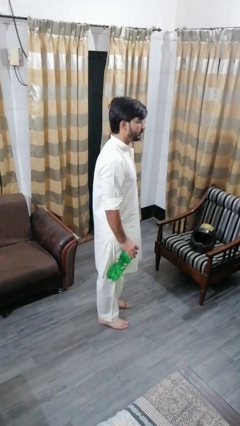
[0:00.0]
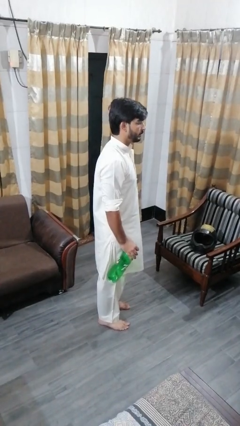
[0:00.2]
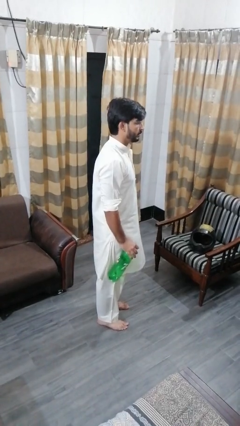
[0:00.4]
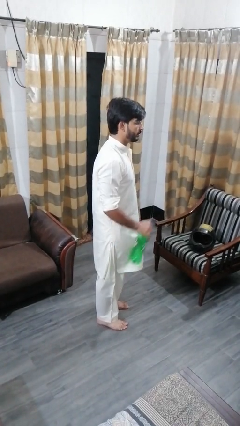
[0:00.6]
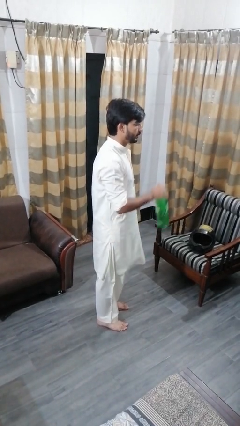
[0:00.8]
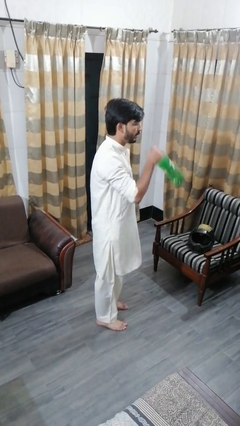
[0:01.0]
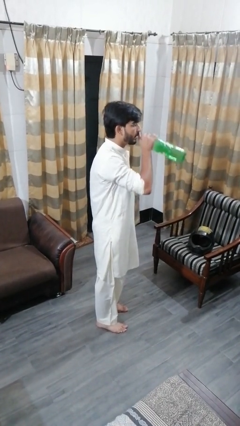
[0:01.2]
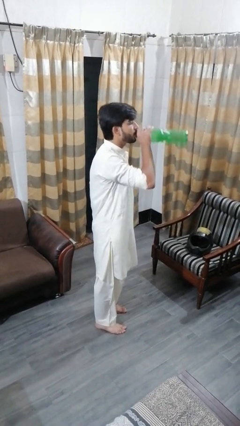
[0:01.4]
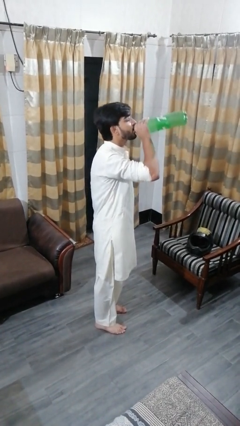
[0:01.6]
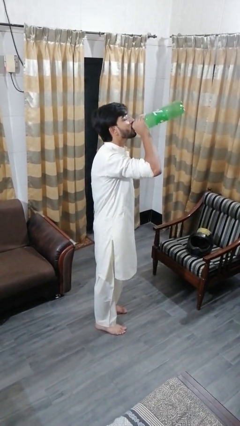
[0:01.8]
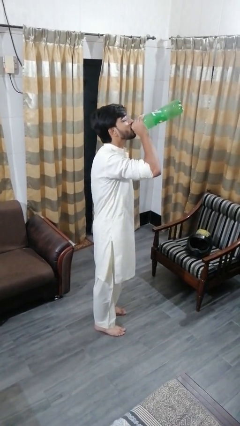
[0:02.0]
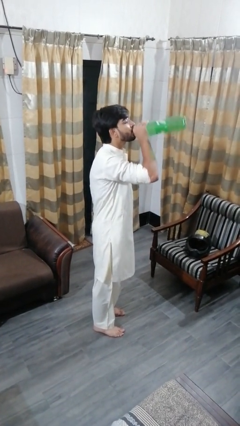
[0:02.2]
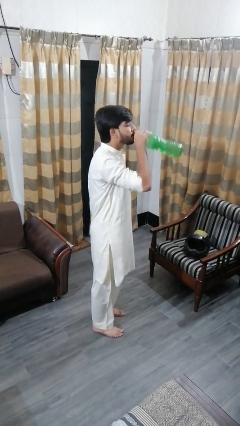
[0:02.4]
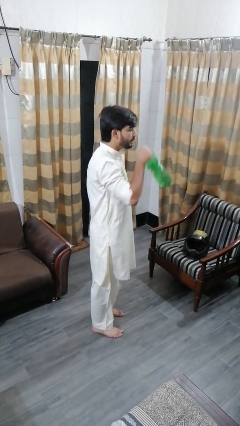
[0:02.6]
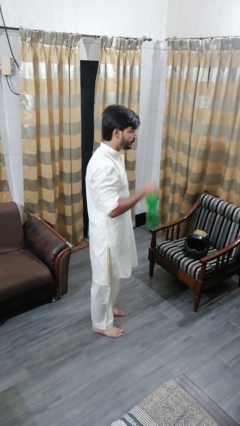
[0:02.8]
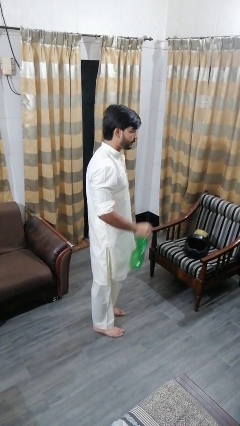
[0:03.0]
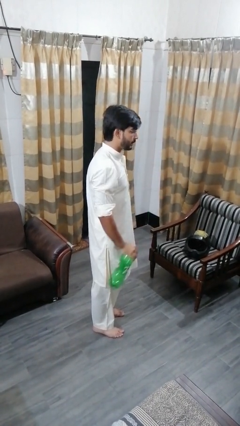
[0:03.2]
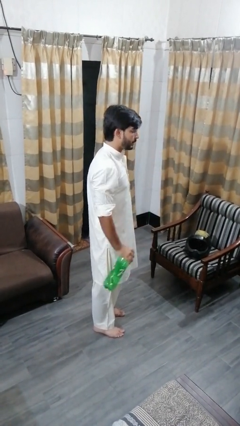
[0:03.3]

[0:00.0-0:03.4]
person drinks from bottle

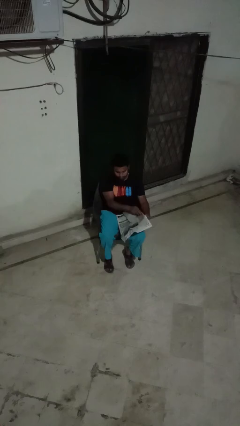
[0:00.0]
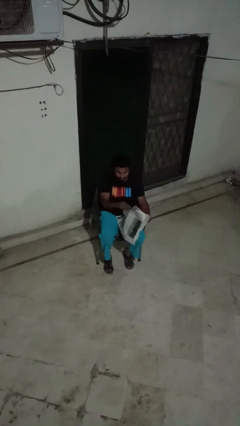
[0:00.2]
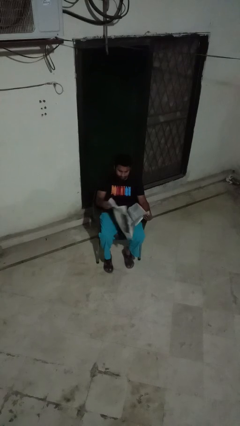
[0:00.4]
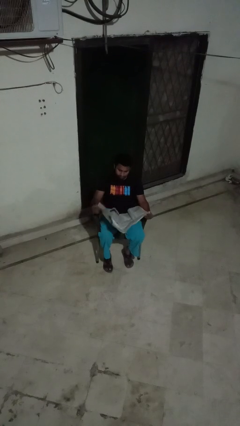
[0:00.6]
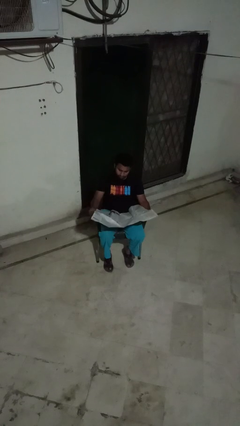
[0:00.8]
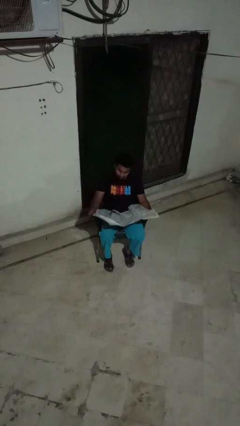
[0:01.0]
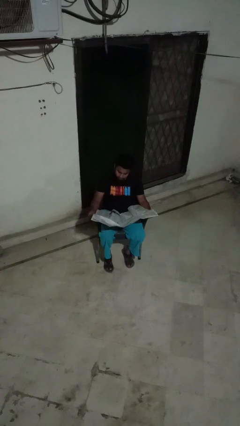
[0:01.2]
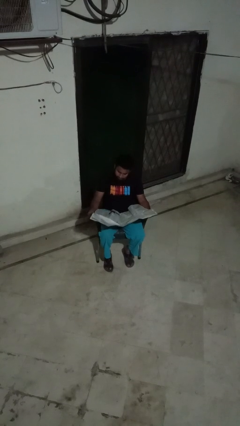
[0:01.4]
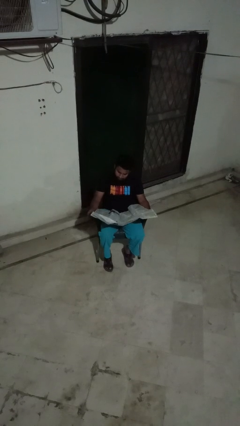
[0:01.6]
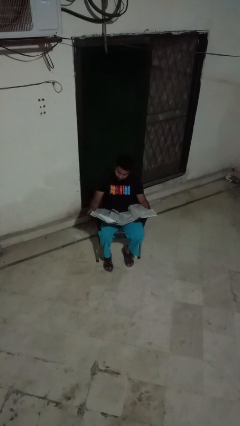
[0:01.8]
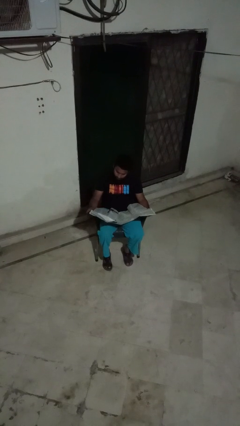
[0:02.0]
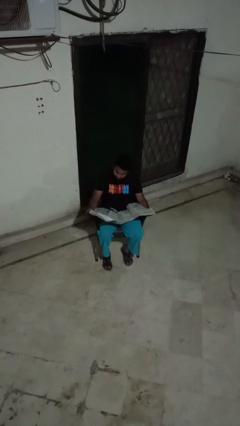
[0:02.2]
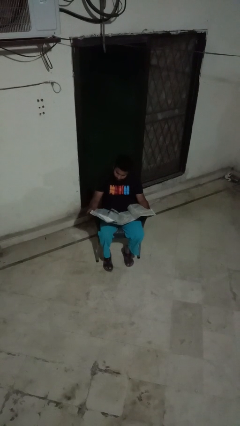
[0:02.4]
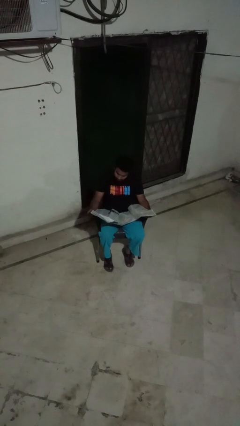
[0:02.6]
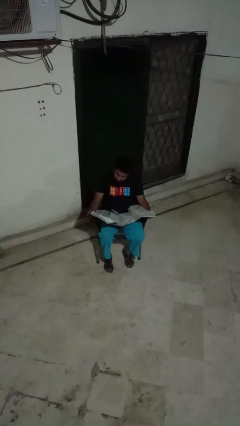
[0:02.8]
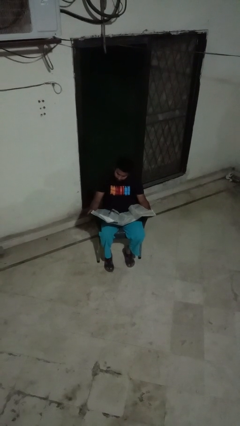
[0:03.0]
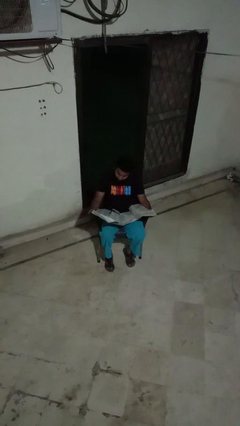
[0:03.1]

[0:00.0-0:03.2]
person reads newspaper

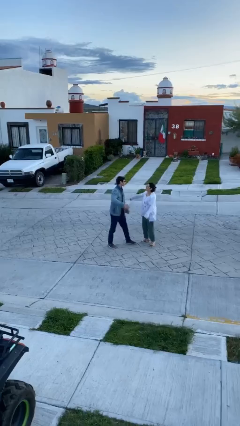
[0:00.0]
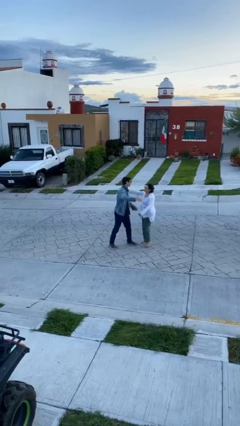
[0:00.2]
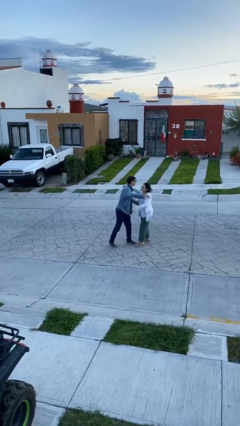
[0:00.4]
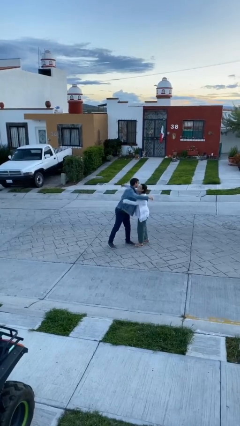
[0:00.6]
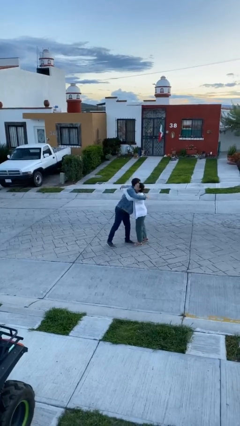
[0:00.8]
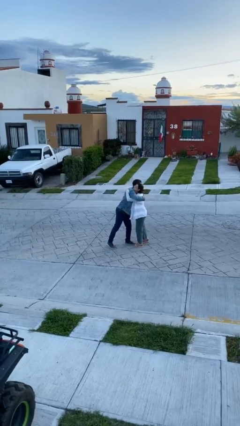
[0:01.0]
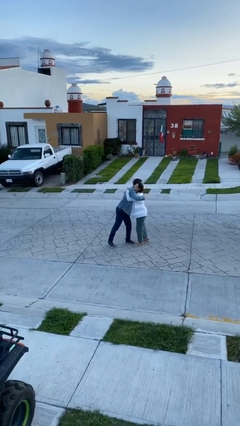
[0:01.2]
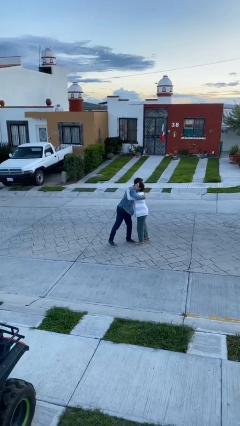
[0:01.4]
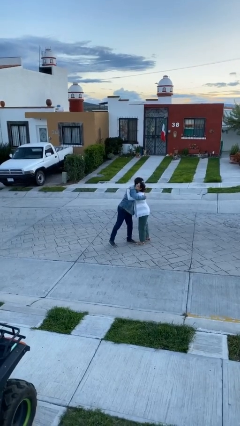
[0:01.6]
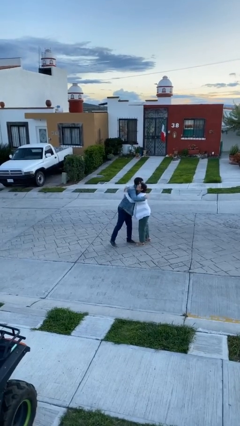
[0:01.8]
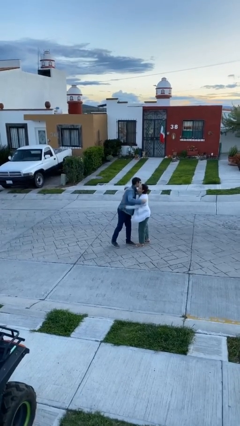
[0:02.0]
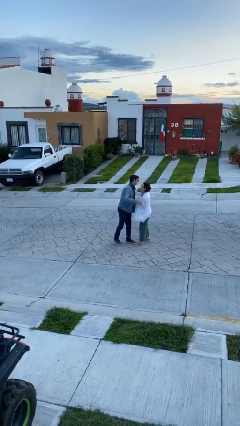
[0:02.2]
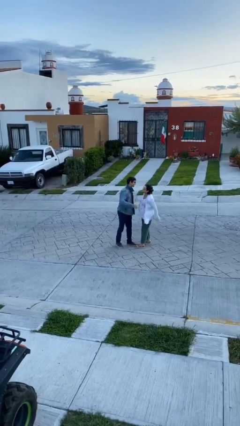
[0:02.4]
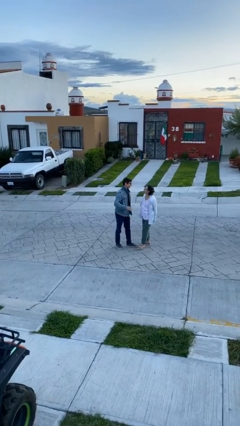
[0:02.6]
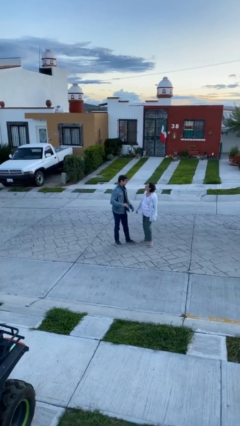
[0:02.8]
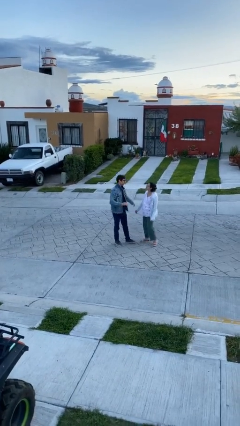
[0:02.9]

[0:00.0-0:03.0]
person embraces person

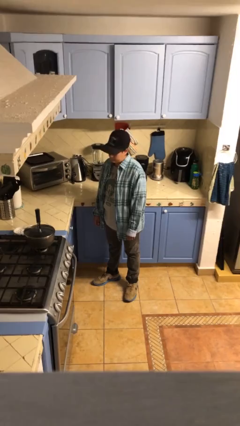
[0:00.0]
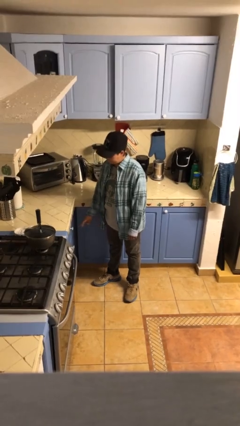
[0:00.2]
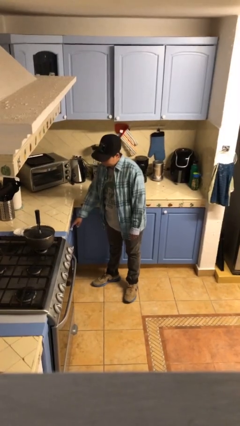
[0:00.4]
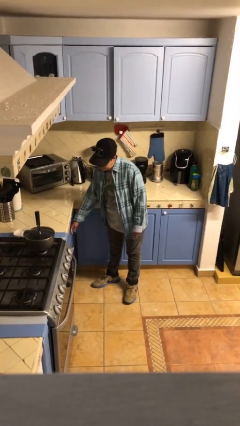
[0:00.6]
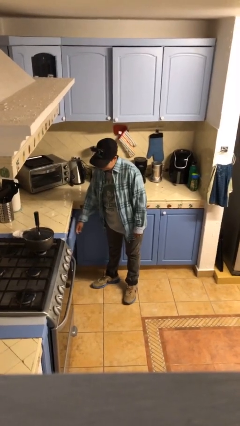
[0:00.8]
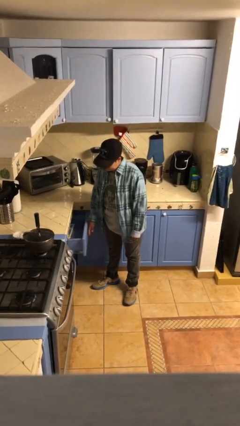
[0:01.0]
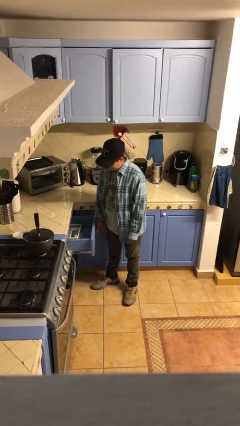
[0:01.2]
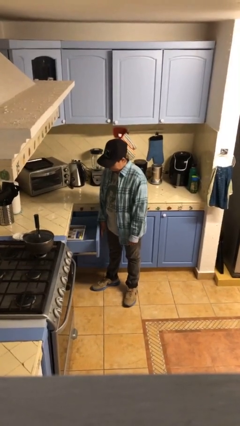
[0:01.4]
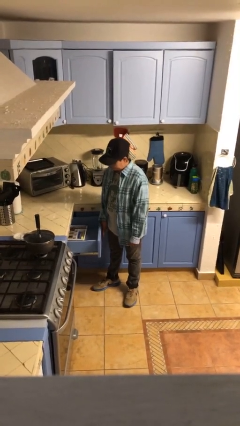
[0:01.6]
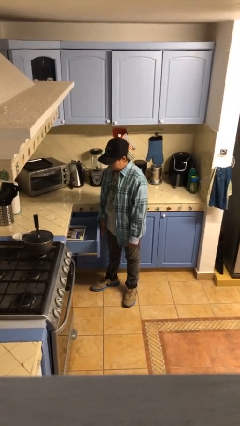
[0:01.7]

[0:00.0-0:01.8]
person opens kitchen drawer

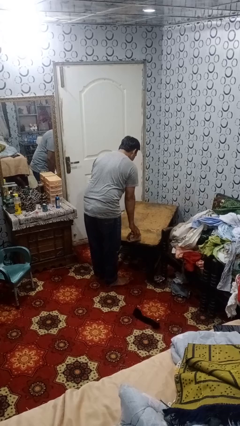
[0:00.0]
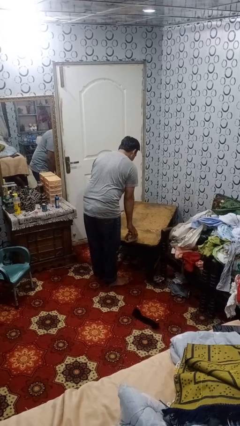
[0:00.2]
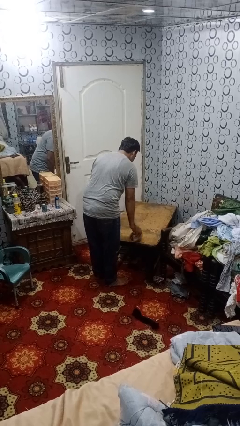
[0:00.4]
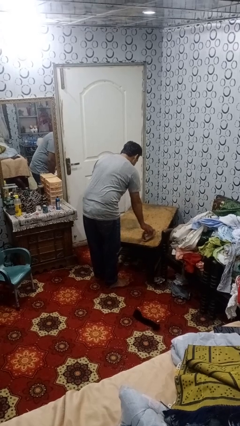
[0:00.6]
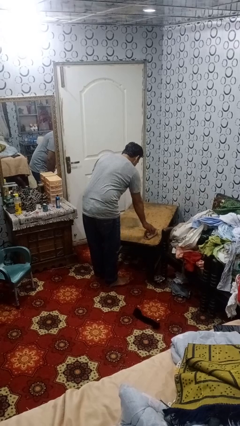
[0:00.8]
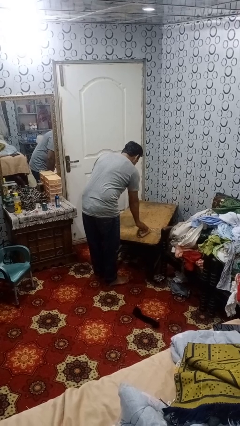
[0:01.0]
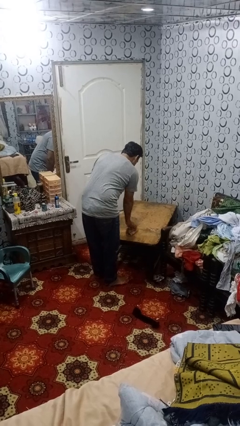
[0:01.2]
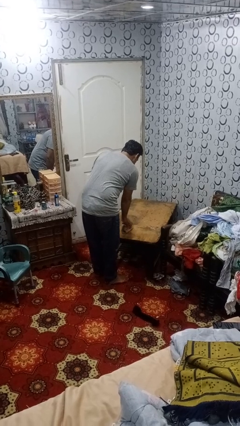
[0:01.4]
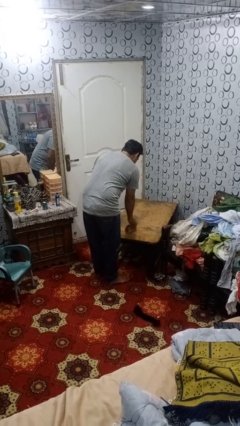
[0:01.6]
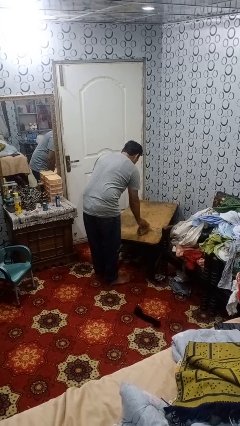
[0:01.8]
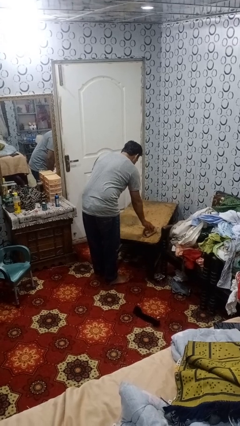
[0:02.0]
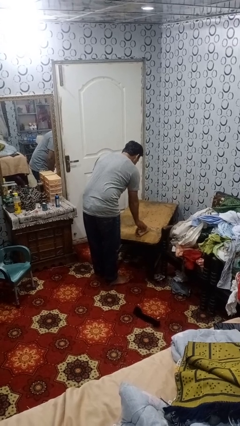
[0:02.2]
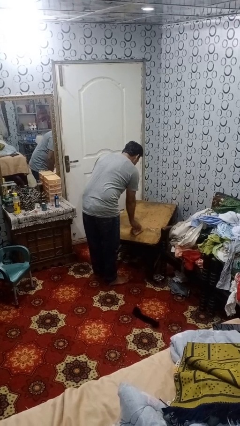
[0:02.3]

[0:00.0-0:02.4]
person cleans table with rag

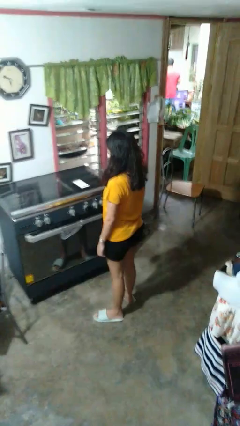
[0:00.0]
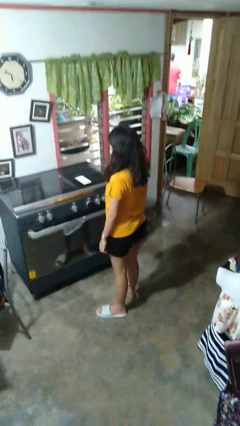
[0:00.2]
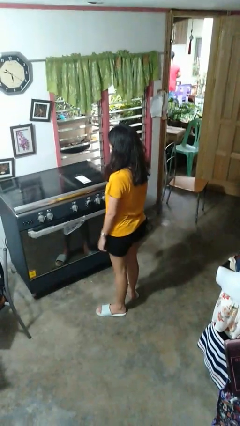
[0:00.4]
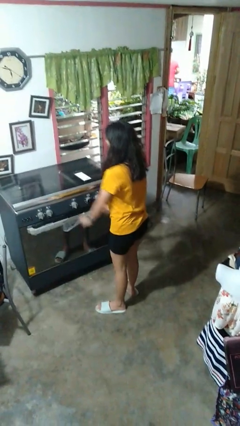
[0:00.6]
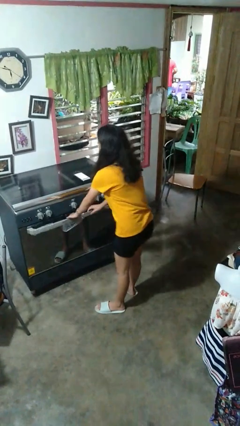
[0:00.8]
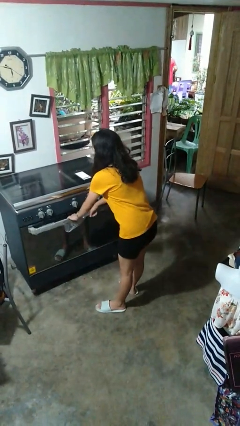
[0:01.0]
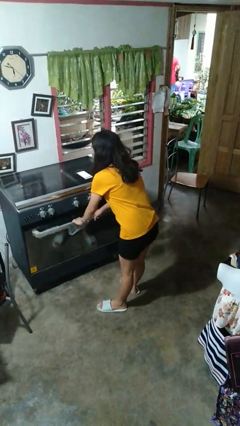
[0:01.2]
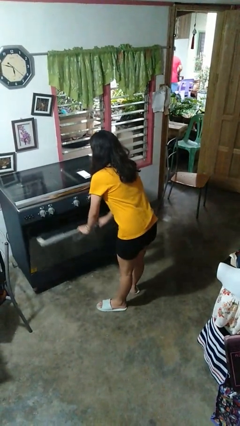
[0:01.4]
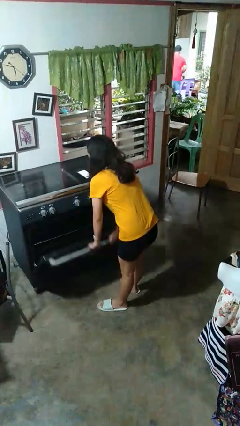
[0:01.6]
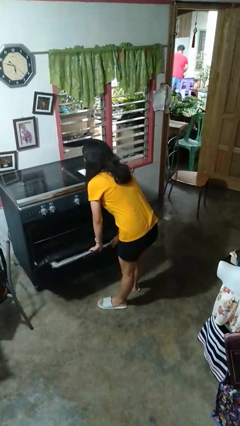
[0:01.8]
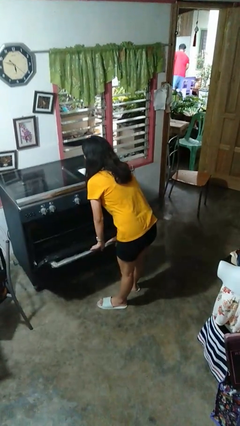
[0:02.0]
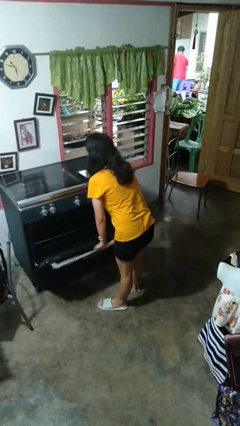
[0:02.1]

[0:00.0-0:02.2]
person opens oven door

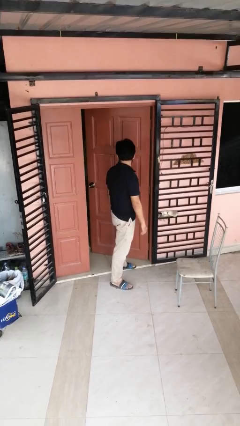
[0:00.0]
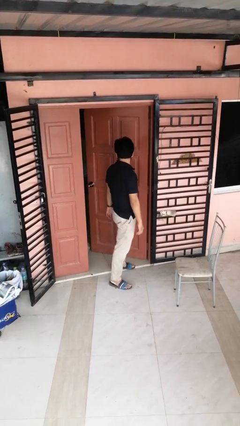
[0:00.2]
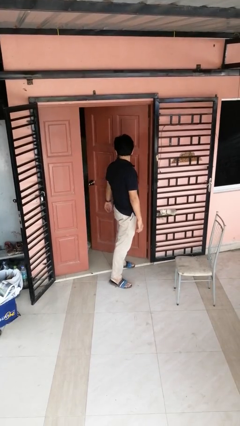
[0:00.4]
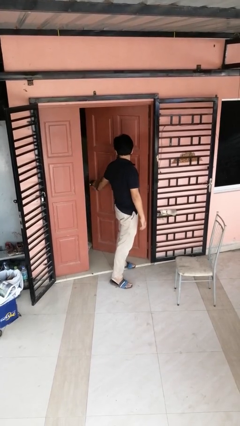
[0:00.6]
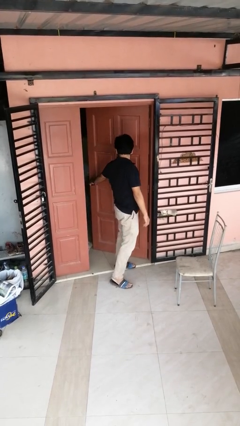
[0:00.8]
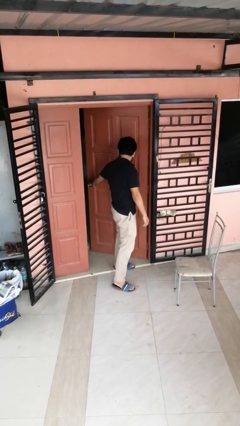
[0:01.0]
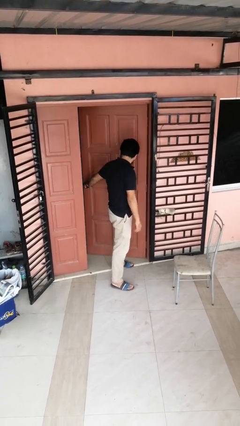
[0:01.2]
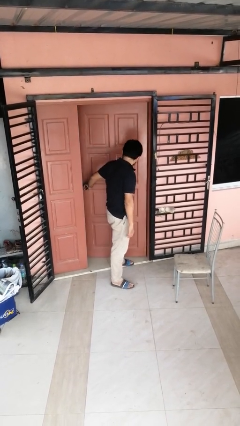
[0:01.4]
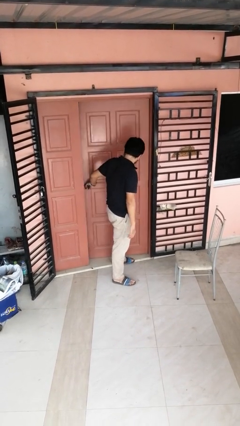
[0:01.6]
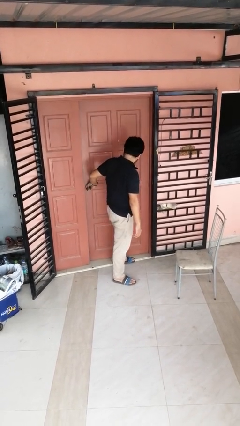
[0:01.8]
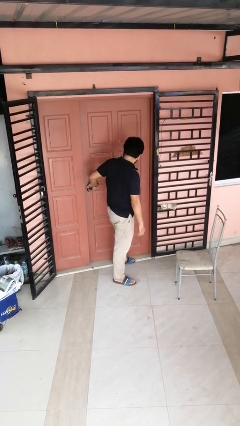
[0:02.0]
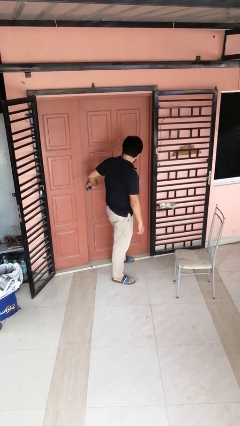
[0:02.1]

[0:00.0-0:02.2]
person closes door with hip
